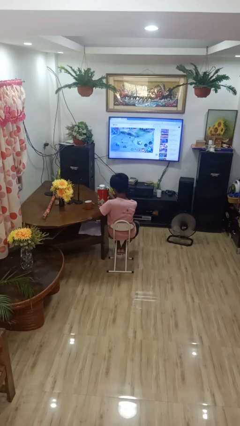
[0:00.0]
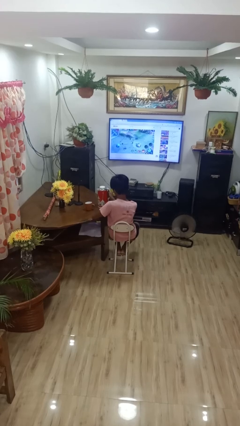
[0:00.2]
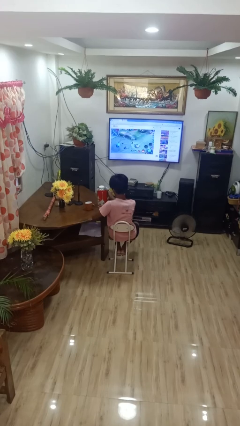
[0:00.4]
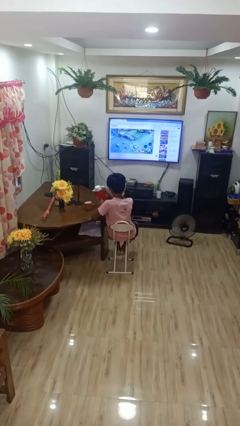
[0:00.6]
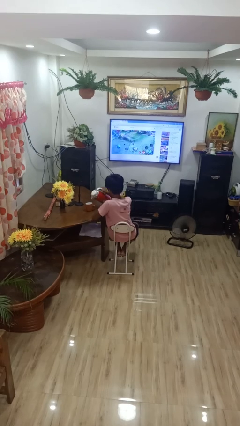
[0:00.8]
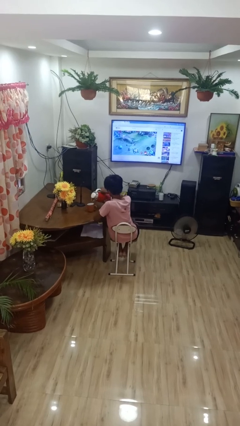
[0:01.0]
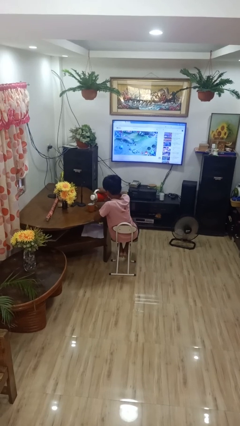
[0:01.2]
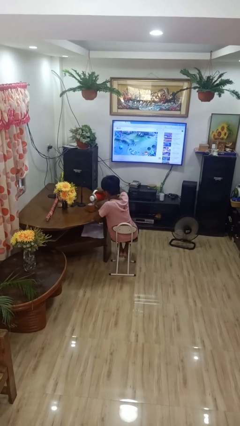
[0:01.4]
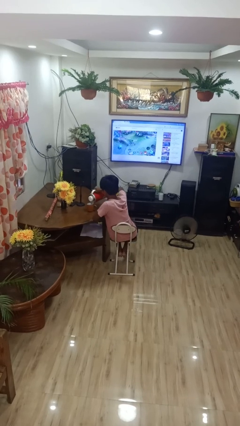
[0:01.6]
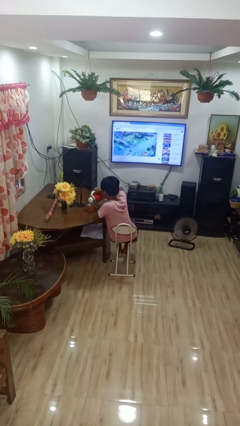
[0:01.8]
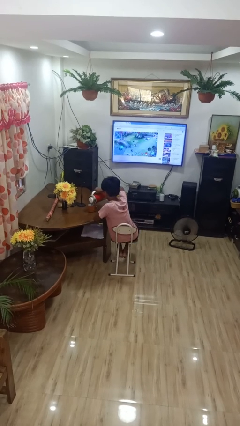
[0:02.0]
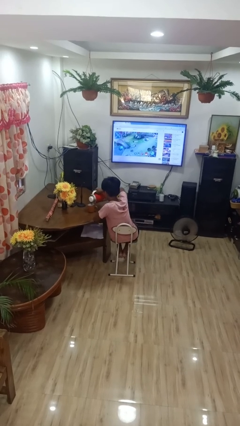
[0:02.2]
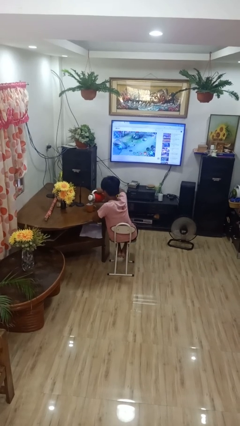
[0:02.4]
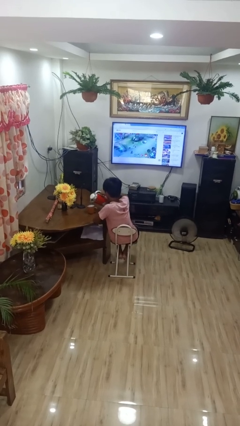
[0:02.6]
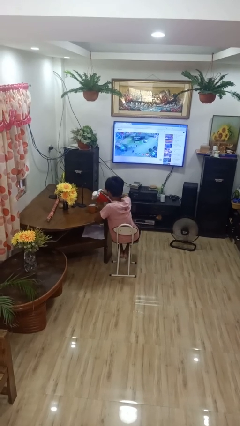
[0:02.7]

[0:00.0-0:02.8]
person pours coffee into mug

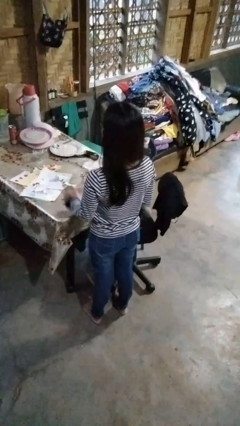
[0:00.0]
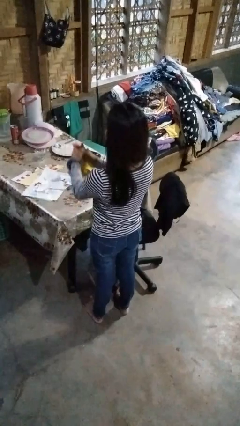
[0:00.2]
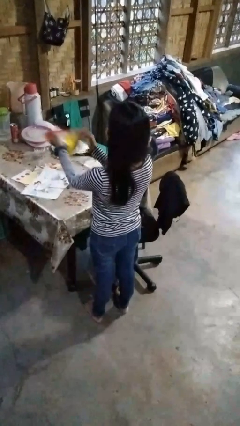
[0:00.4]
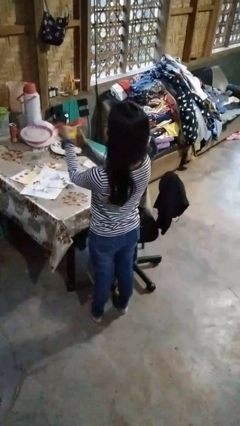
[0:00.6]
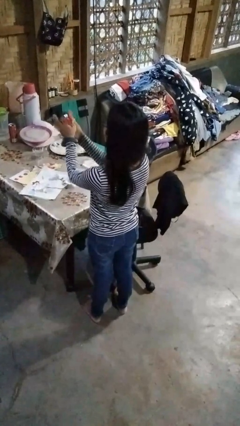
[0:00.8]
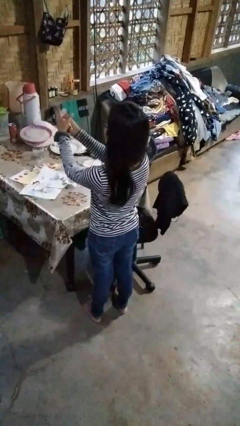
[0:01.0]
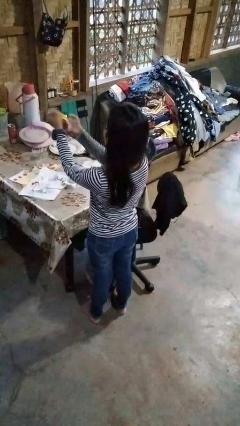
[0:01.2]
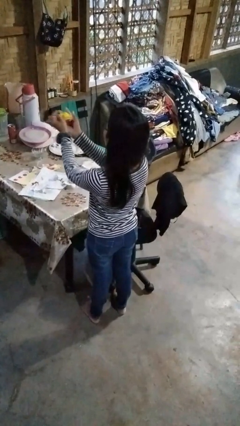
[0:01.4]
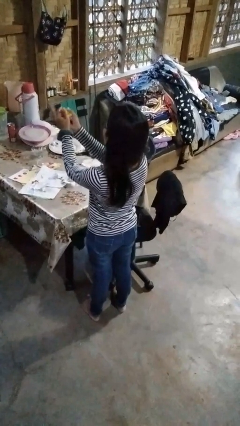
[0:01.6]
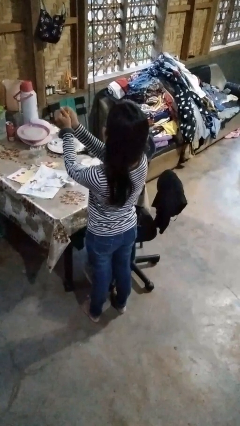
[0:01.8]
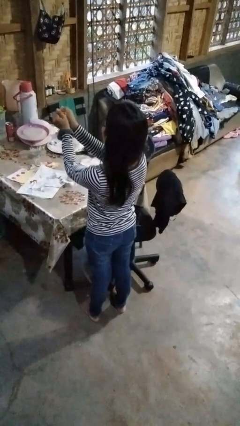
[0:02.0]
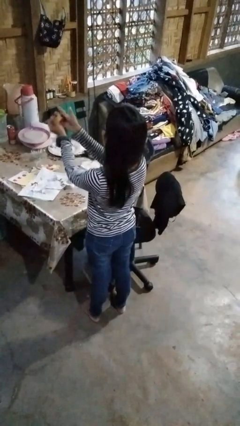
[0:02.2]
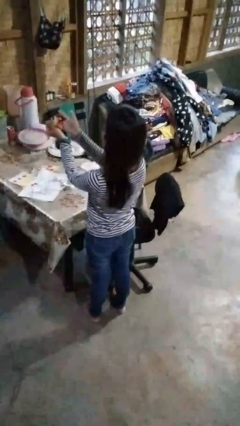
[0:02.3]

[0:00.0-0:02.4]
person crumples paper

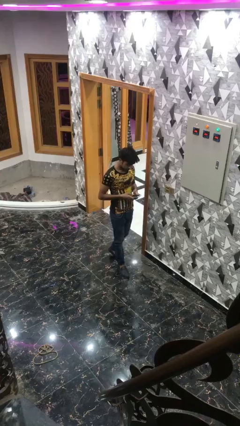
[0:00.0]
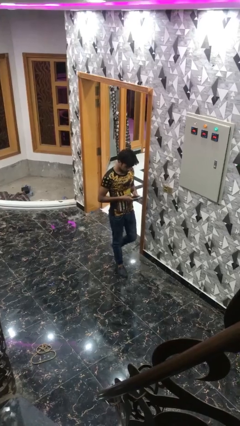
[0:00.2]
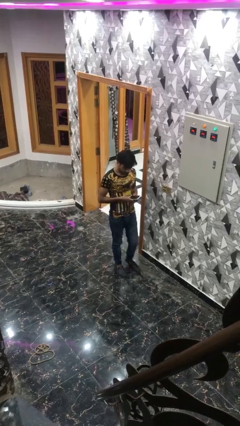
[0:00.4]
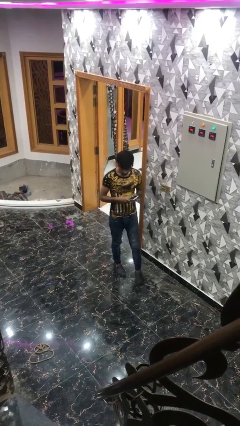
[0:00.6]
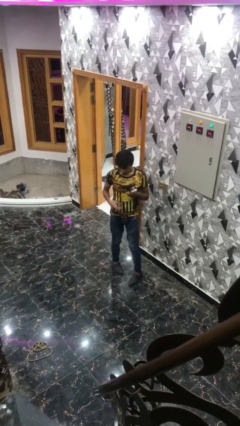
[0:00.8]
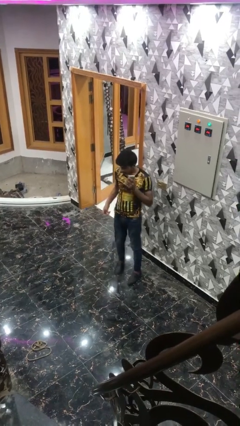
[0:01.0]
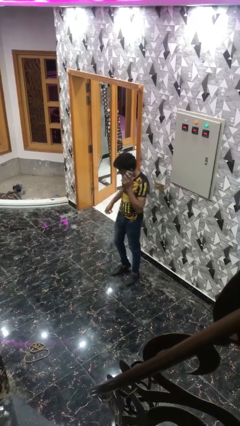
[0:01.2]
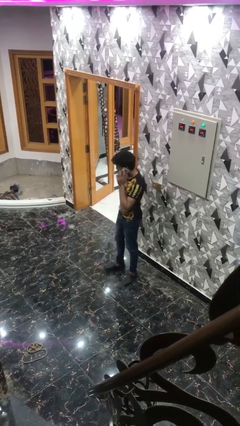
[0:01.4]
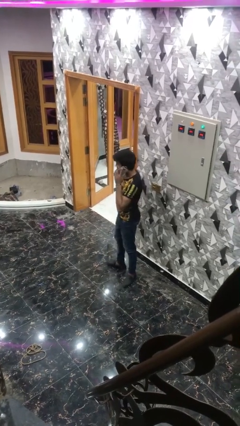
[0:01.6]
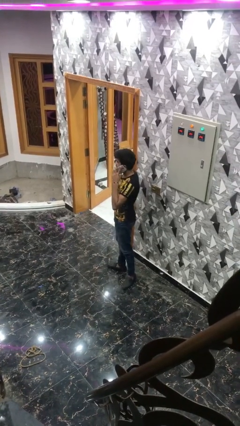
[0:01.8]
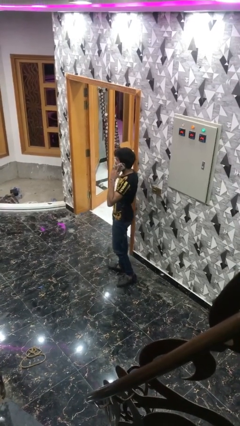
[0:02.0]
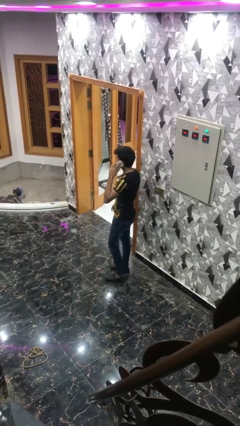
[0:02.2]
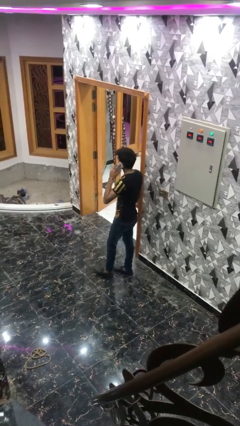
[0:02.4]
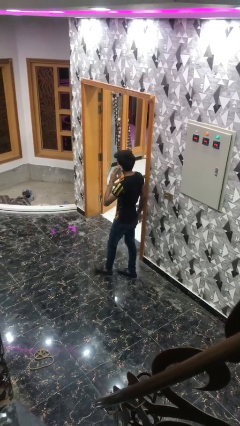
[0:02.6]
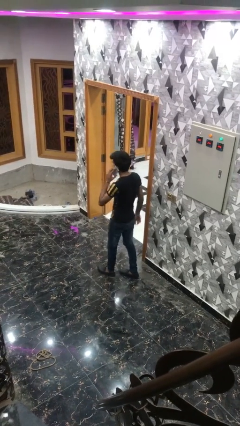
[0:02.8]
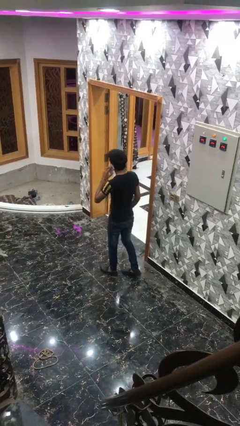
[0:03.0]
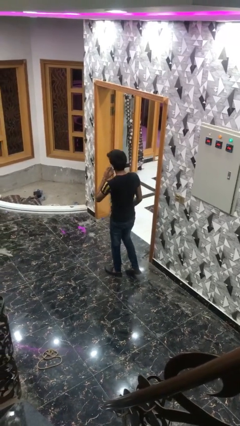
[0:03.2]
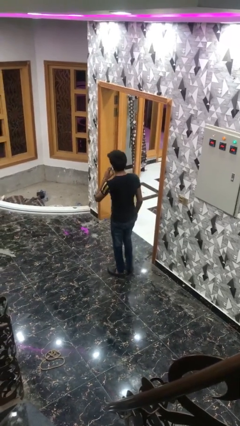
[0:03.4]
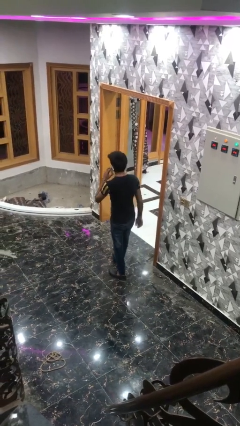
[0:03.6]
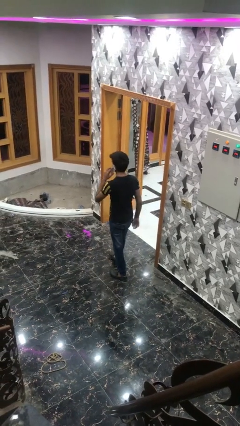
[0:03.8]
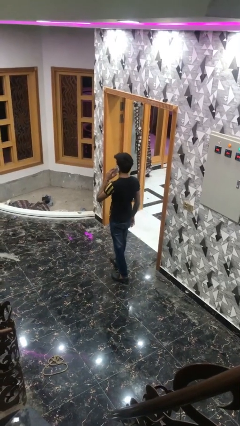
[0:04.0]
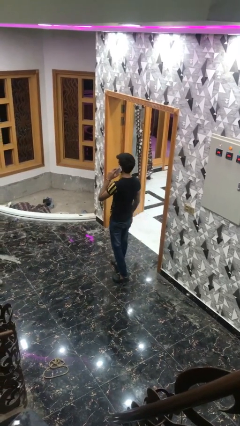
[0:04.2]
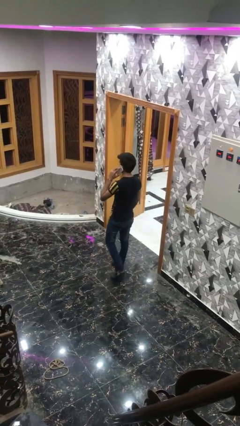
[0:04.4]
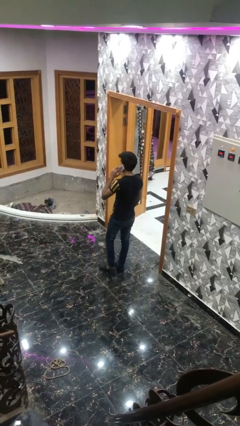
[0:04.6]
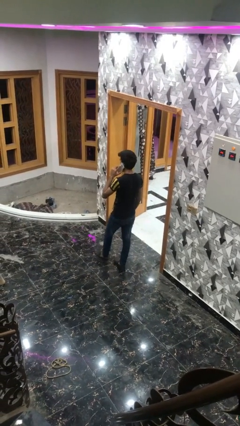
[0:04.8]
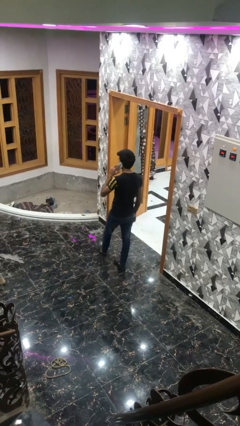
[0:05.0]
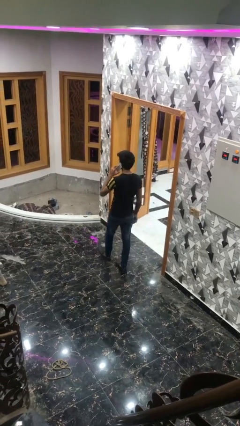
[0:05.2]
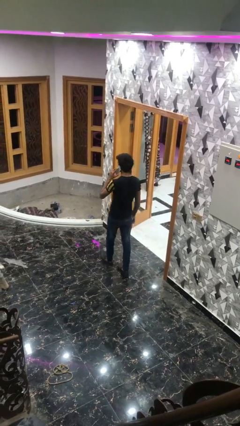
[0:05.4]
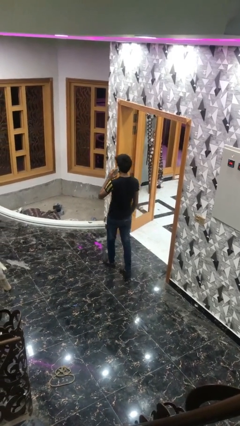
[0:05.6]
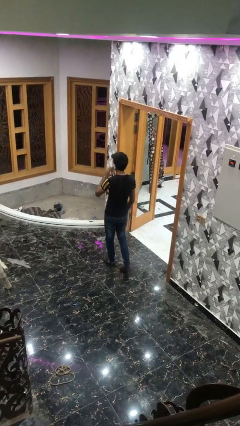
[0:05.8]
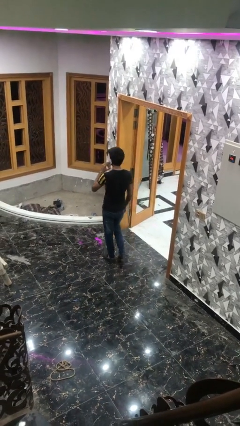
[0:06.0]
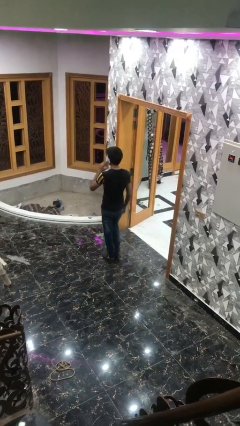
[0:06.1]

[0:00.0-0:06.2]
person talks on phone

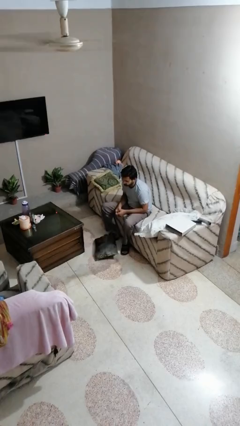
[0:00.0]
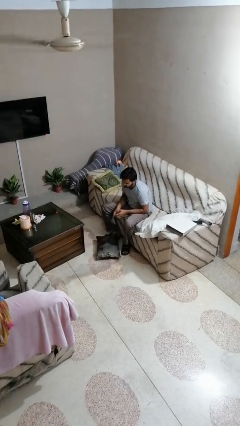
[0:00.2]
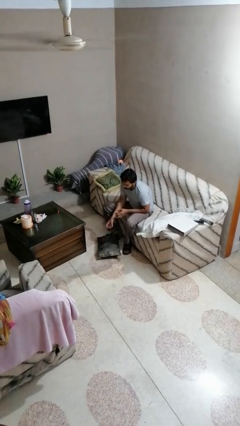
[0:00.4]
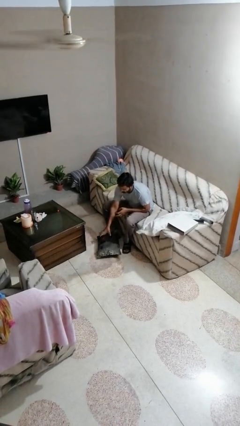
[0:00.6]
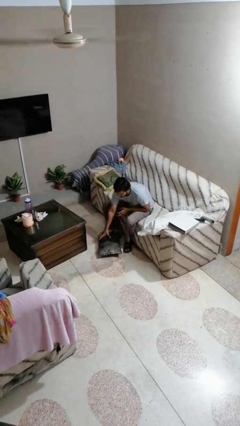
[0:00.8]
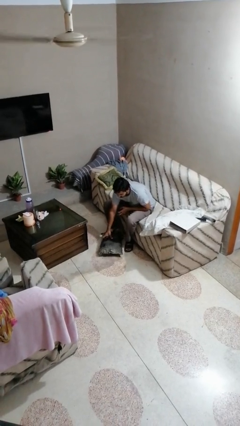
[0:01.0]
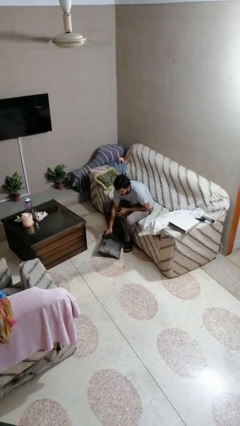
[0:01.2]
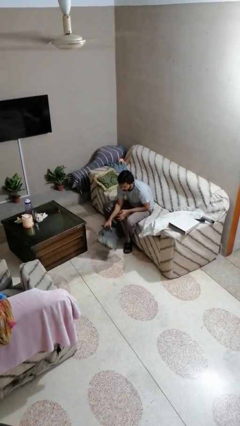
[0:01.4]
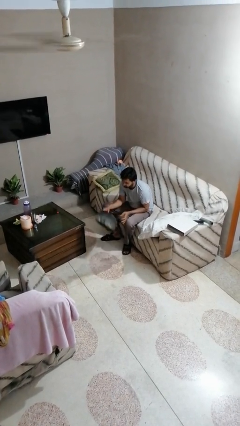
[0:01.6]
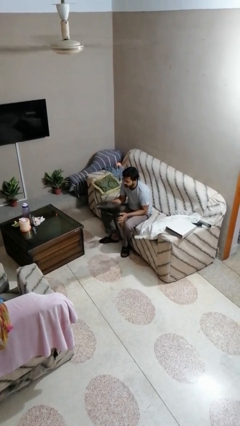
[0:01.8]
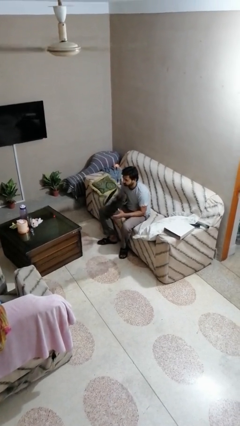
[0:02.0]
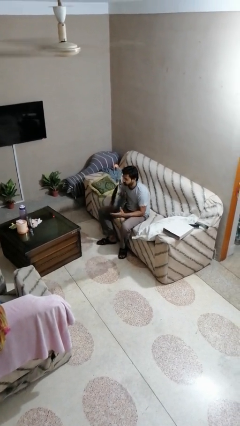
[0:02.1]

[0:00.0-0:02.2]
person picks up object from floor

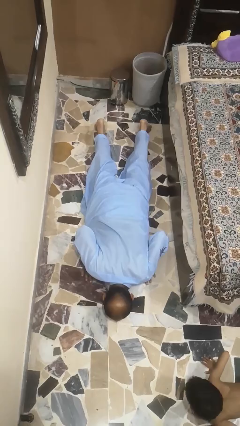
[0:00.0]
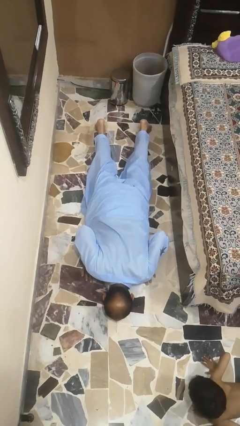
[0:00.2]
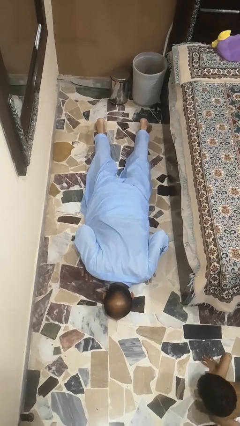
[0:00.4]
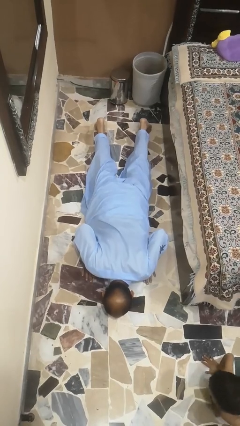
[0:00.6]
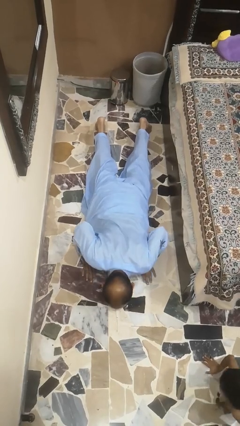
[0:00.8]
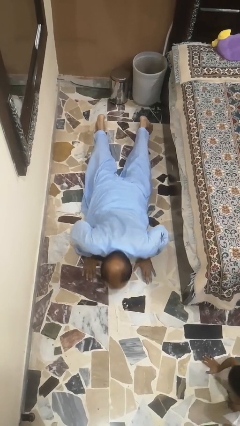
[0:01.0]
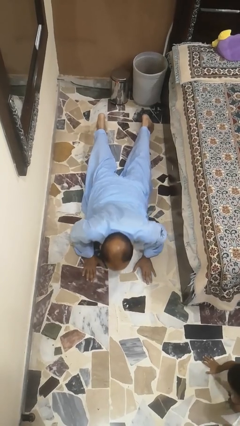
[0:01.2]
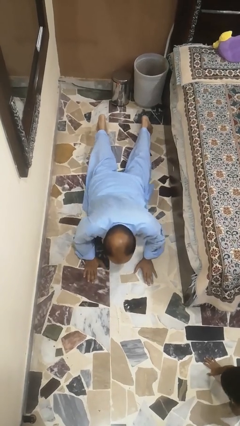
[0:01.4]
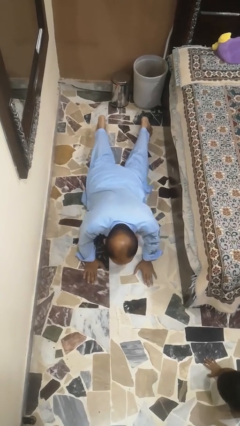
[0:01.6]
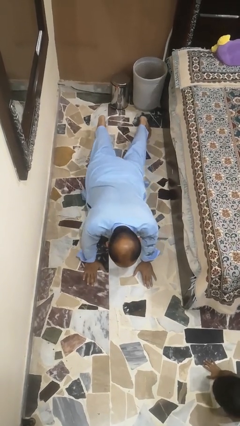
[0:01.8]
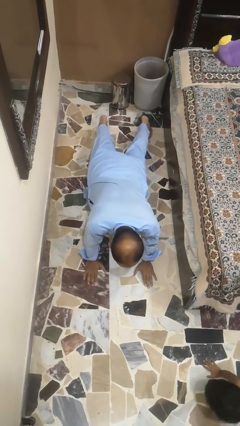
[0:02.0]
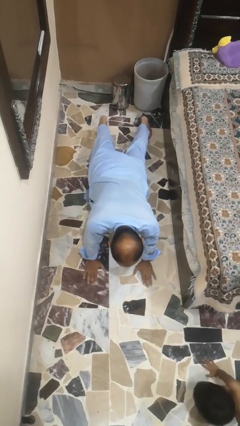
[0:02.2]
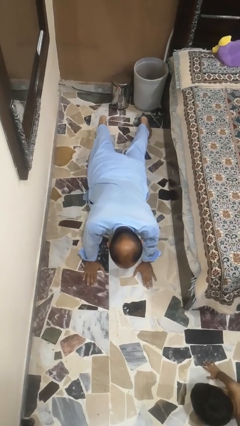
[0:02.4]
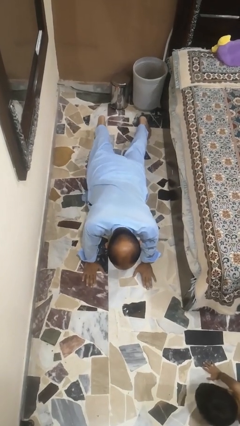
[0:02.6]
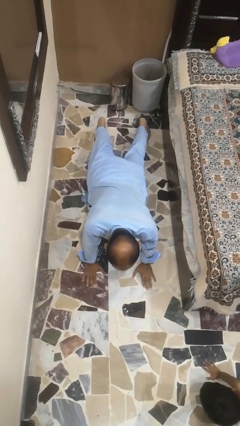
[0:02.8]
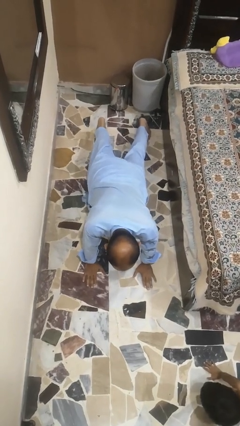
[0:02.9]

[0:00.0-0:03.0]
person exercises with pushup

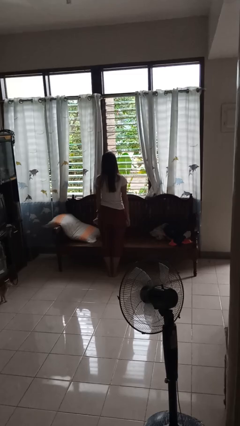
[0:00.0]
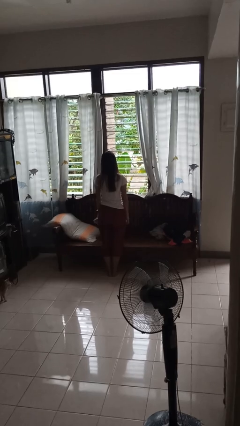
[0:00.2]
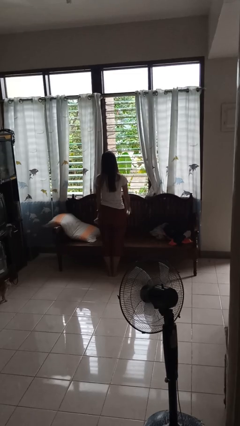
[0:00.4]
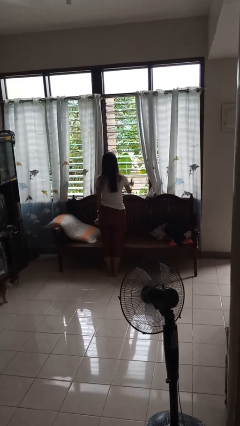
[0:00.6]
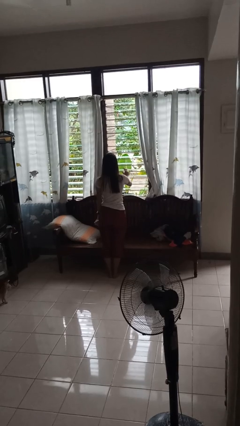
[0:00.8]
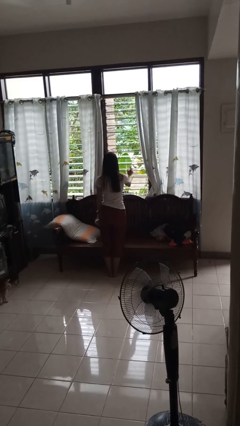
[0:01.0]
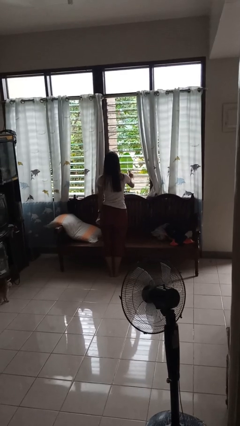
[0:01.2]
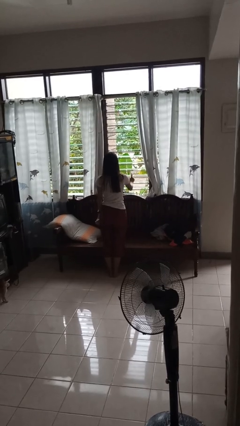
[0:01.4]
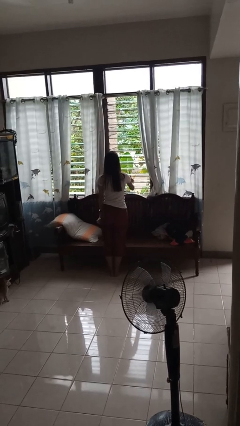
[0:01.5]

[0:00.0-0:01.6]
person sprays from bottle
